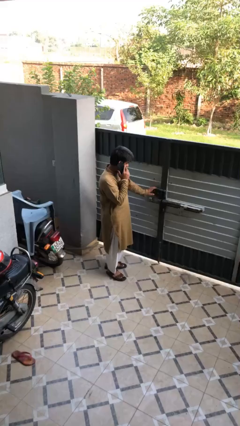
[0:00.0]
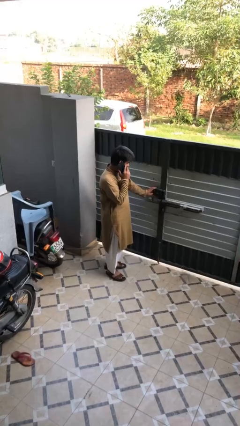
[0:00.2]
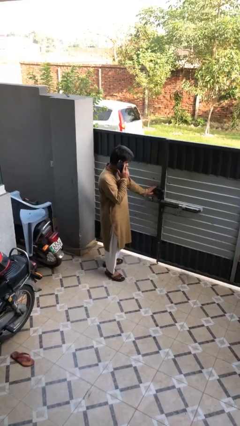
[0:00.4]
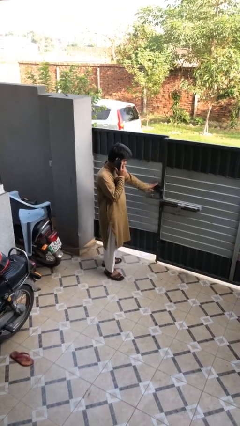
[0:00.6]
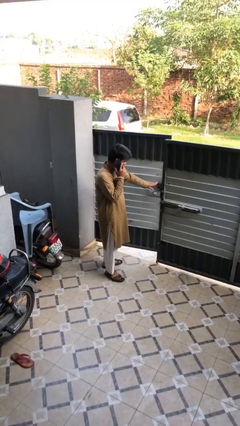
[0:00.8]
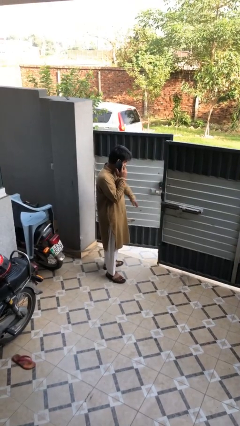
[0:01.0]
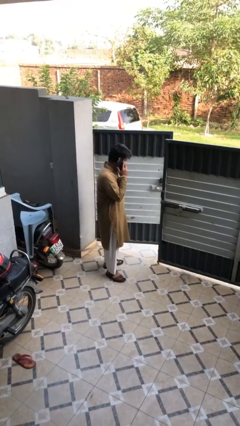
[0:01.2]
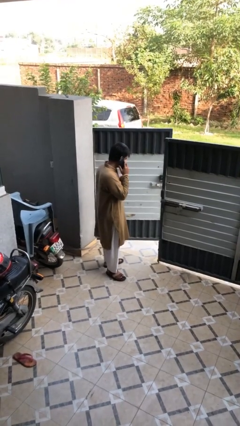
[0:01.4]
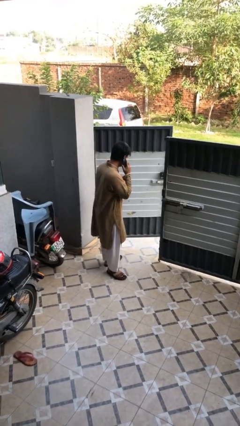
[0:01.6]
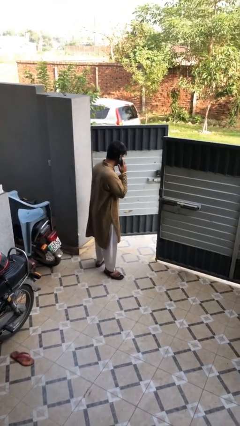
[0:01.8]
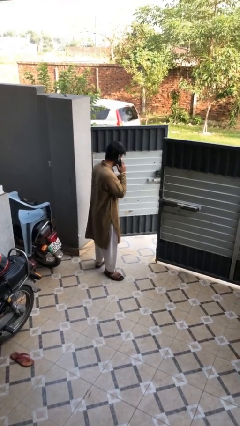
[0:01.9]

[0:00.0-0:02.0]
person opens facility door

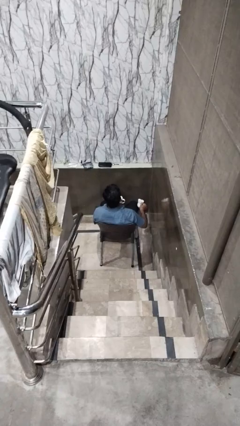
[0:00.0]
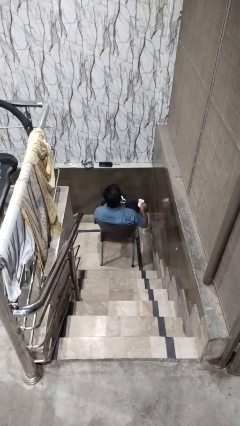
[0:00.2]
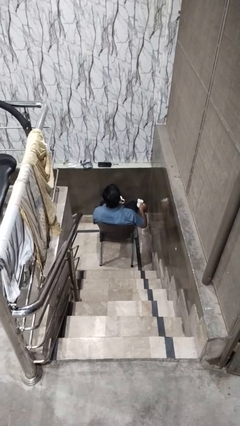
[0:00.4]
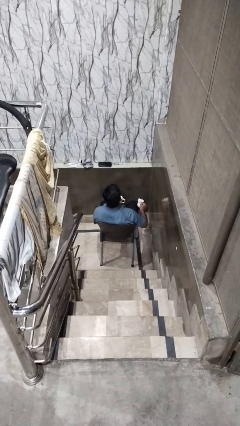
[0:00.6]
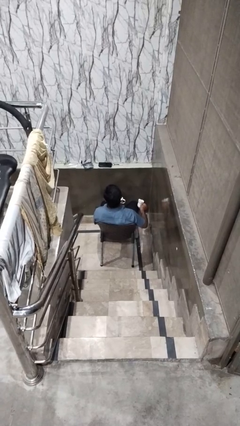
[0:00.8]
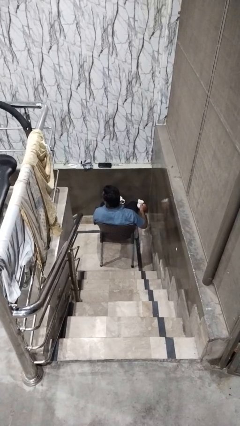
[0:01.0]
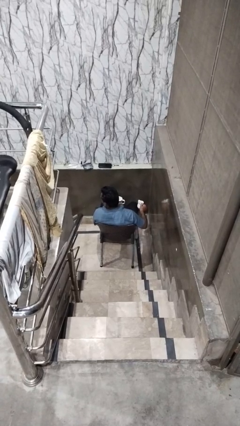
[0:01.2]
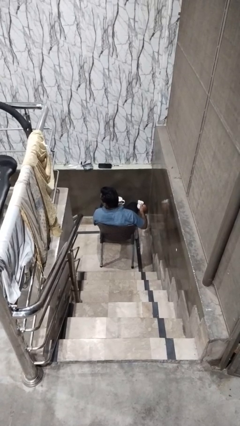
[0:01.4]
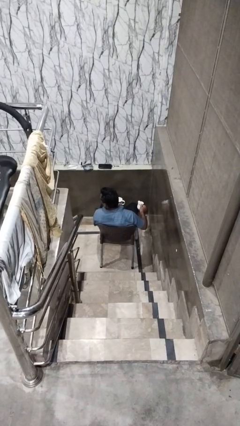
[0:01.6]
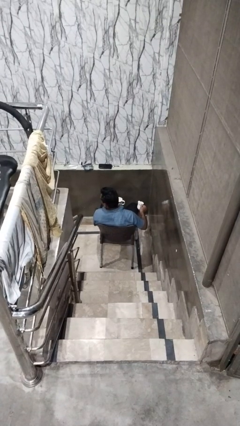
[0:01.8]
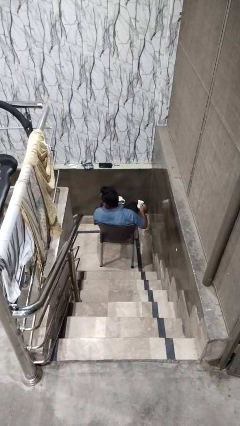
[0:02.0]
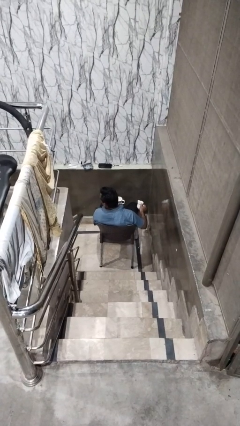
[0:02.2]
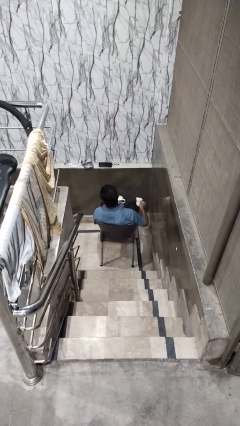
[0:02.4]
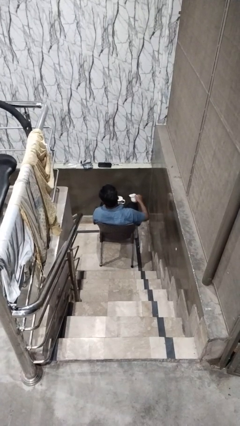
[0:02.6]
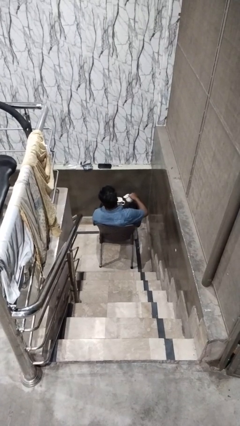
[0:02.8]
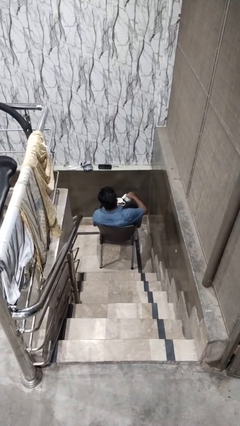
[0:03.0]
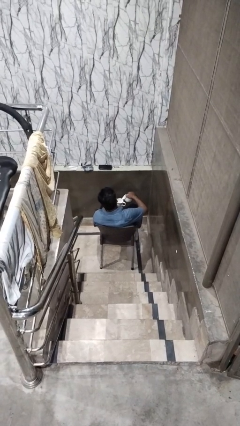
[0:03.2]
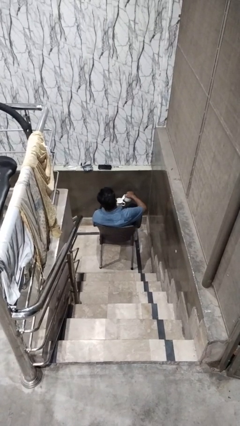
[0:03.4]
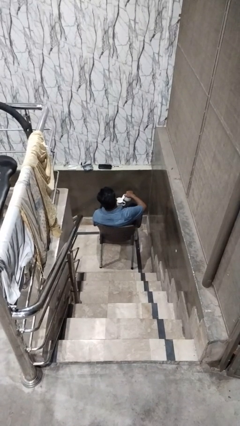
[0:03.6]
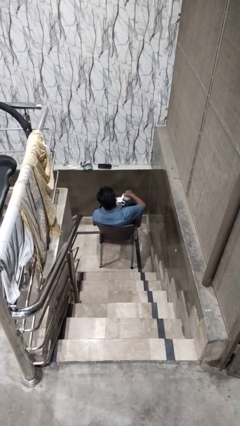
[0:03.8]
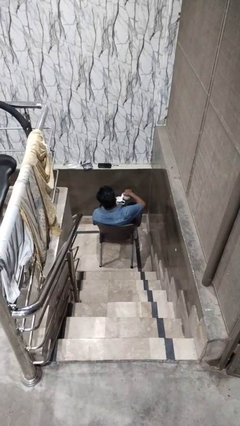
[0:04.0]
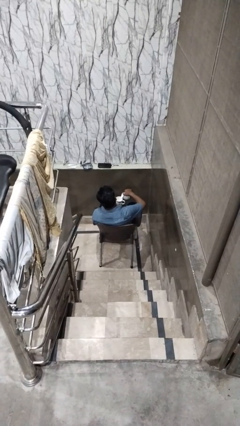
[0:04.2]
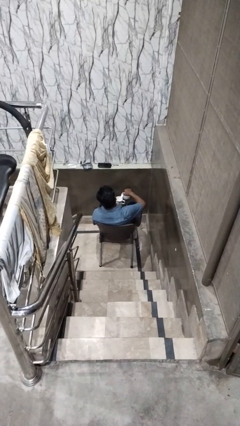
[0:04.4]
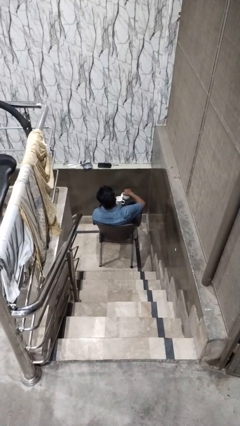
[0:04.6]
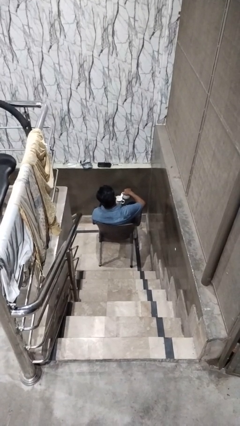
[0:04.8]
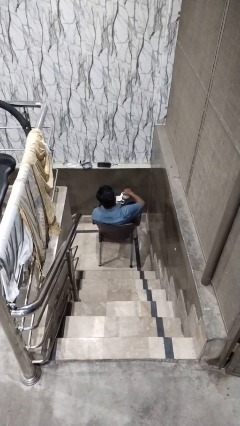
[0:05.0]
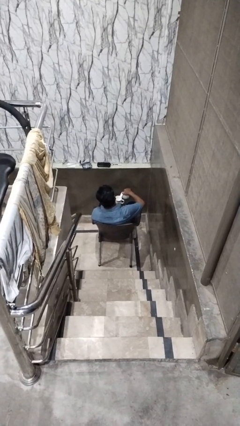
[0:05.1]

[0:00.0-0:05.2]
person pours coffee into mug

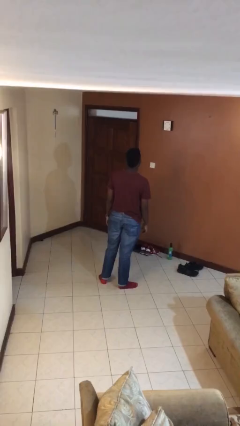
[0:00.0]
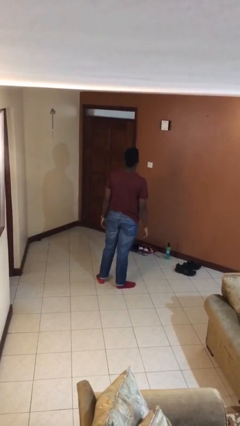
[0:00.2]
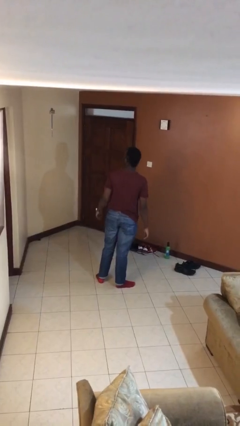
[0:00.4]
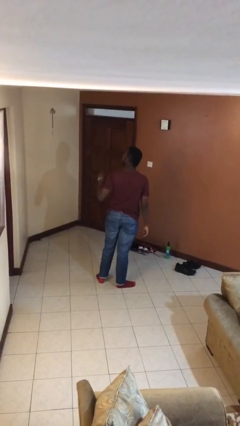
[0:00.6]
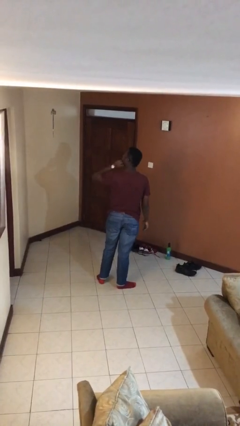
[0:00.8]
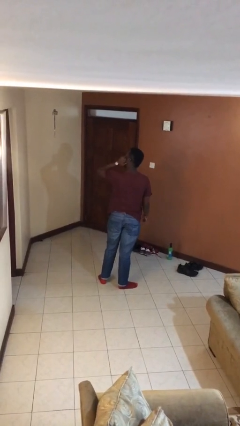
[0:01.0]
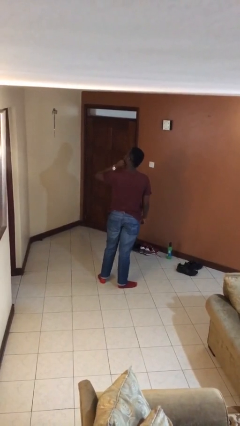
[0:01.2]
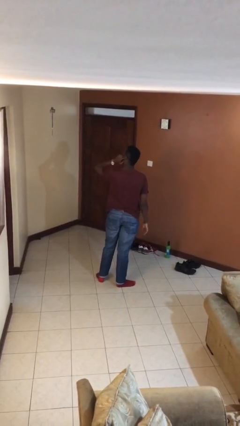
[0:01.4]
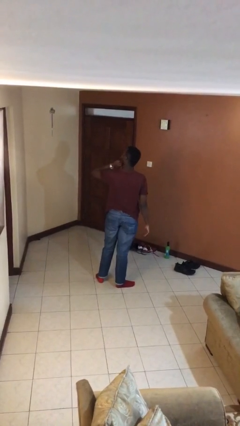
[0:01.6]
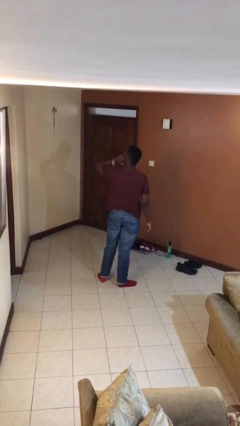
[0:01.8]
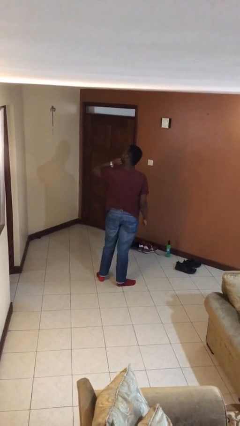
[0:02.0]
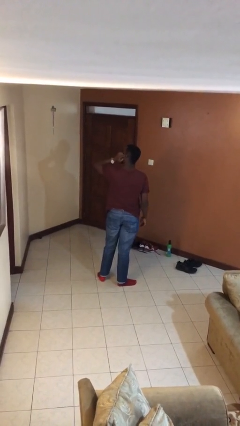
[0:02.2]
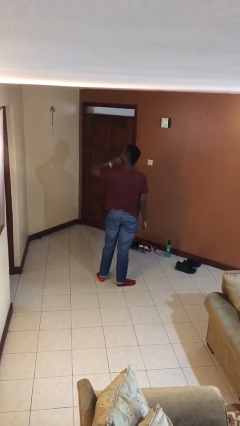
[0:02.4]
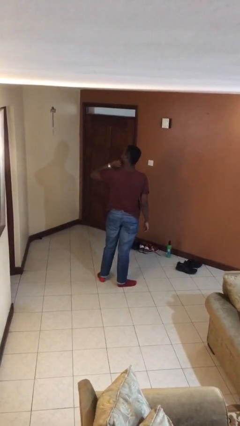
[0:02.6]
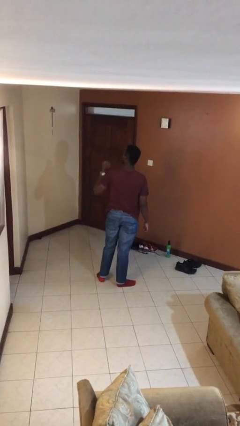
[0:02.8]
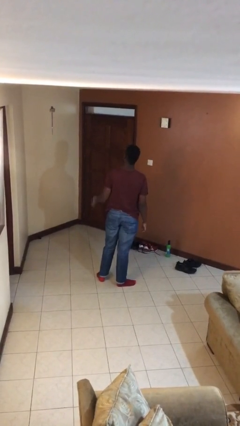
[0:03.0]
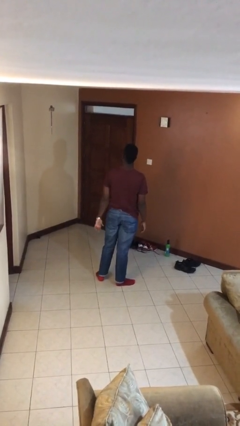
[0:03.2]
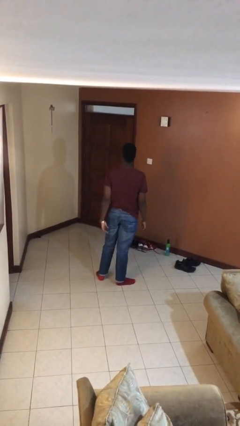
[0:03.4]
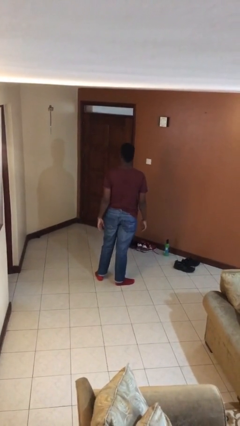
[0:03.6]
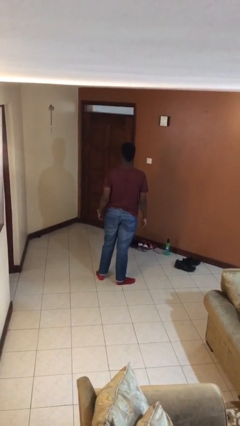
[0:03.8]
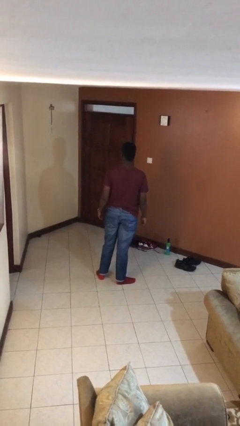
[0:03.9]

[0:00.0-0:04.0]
person scratches face

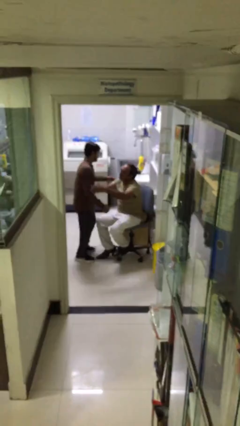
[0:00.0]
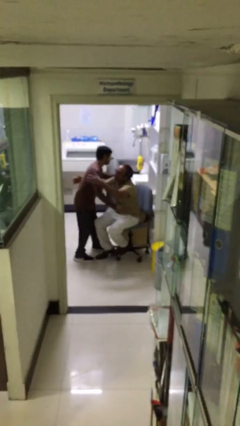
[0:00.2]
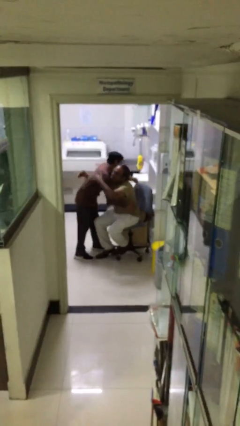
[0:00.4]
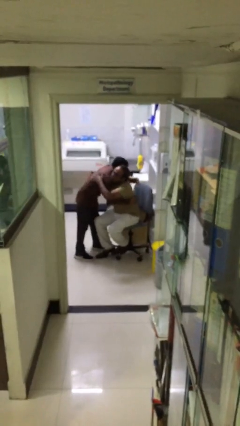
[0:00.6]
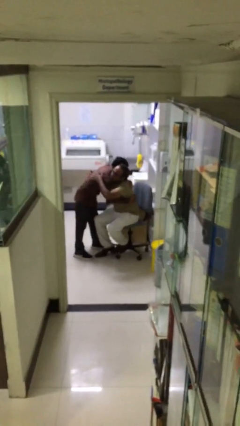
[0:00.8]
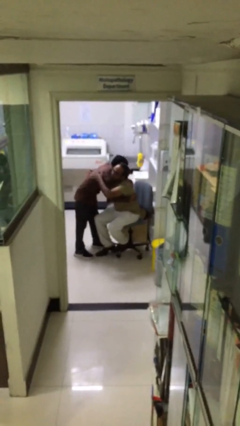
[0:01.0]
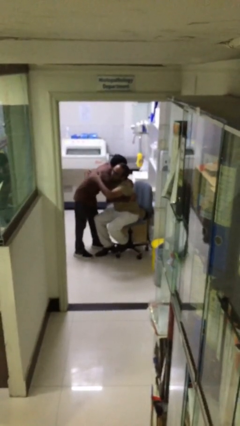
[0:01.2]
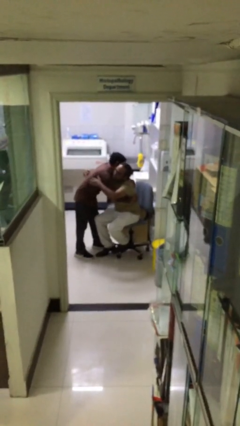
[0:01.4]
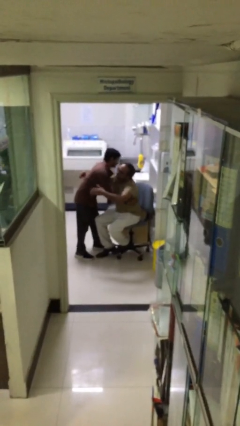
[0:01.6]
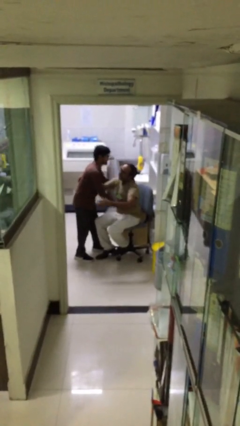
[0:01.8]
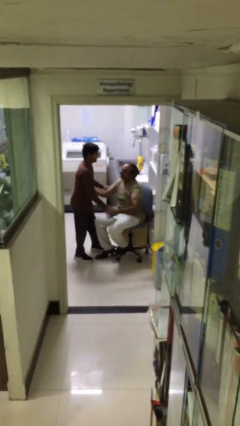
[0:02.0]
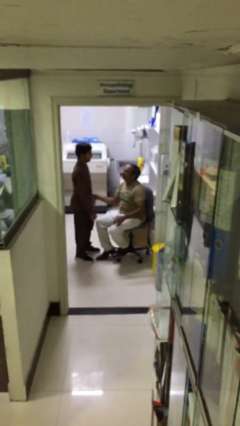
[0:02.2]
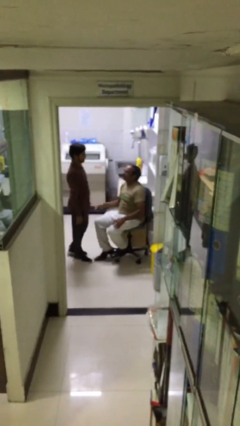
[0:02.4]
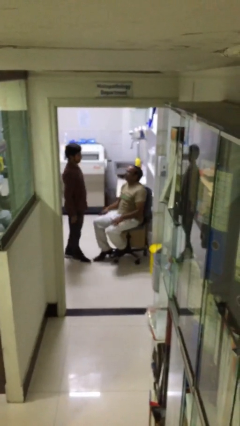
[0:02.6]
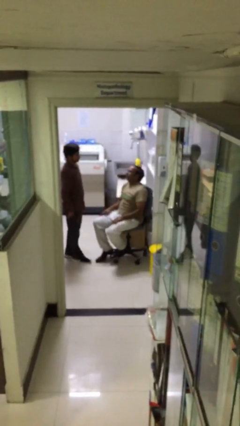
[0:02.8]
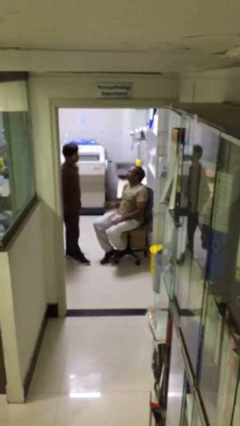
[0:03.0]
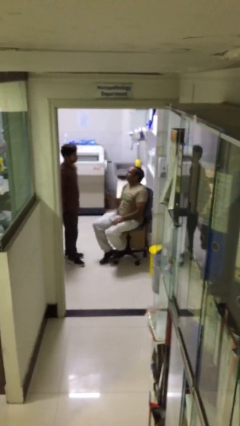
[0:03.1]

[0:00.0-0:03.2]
person embraces person

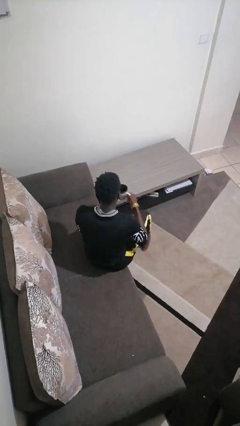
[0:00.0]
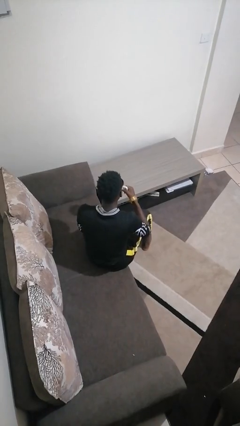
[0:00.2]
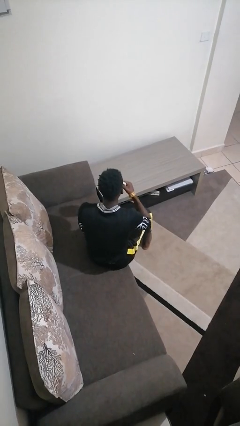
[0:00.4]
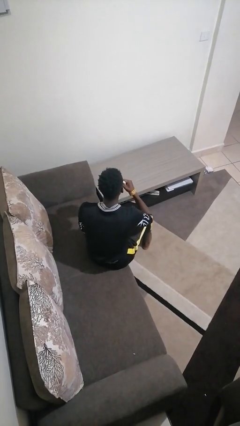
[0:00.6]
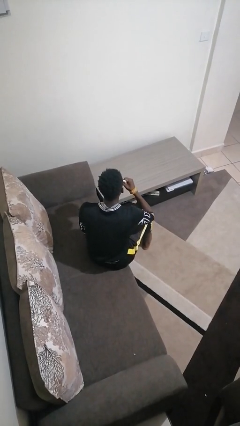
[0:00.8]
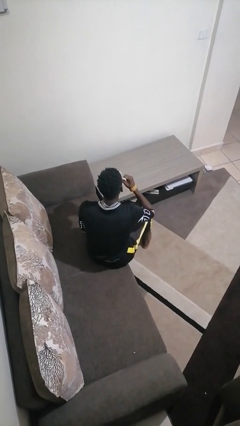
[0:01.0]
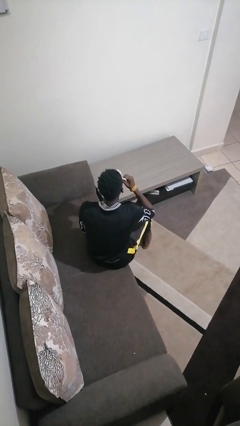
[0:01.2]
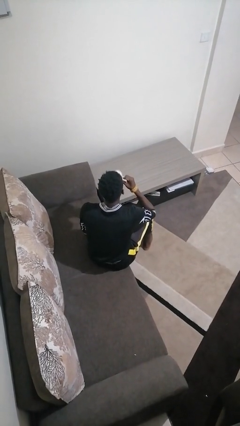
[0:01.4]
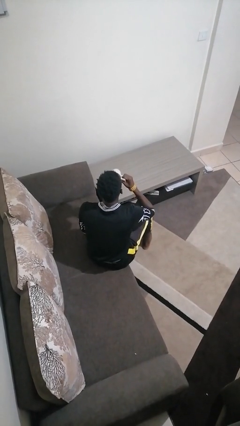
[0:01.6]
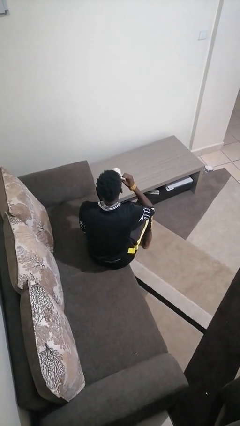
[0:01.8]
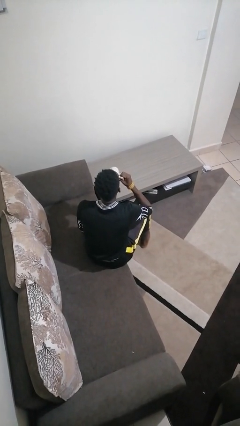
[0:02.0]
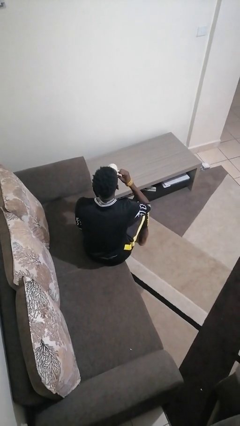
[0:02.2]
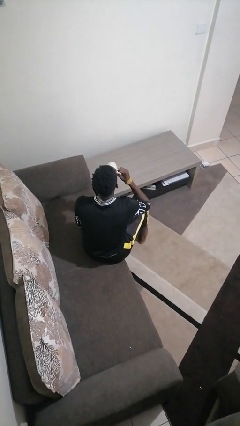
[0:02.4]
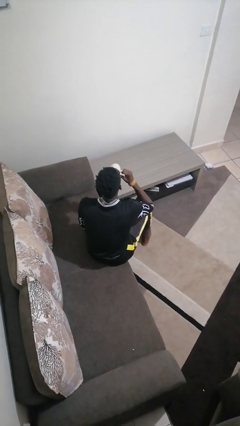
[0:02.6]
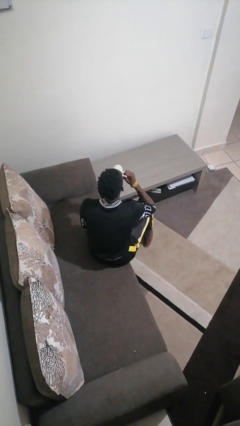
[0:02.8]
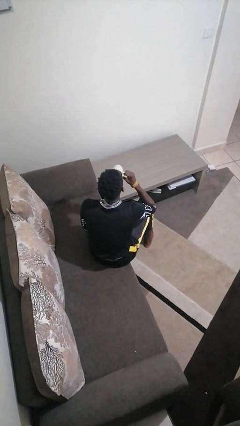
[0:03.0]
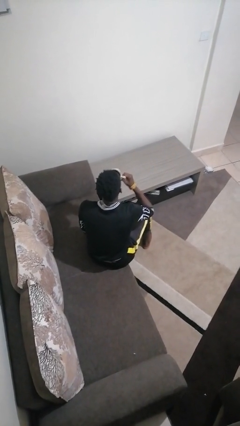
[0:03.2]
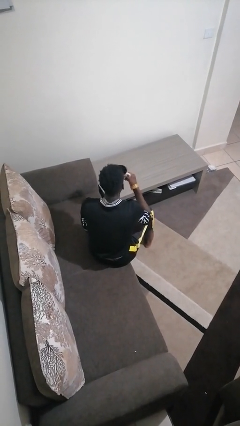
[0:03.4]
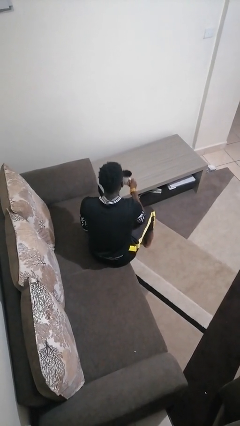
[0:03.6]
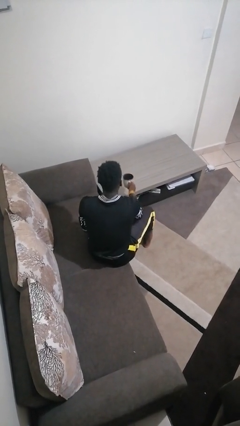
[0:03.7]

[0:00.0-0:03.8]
person drinks from mug
